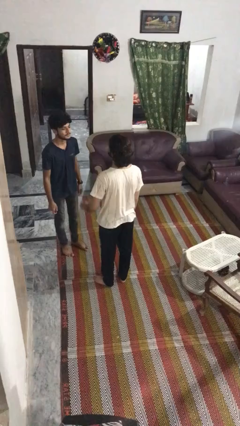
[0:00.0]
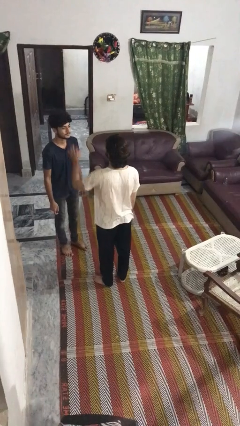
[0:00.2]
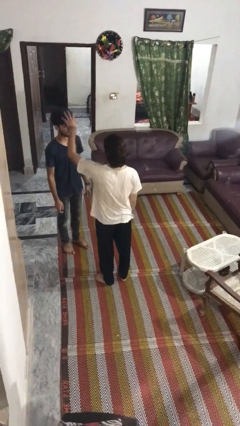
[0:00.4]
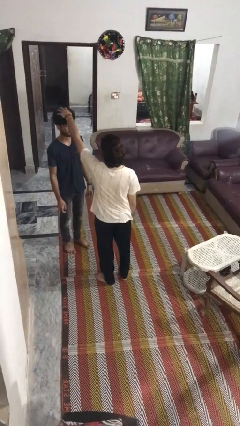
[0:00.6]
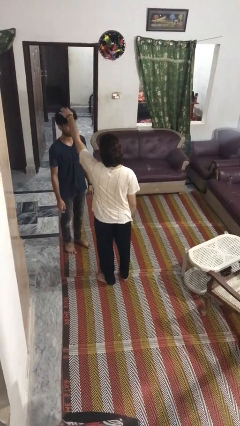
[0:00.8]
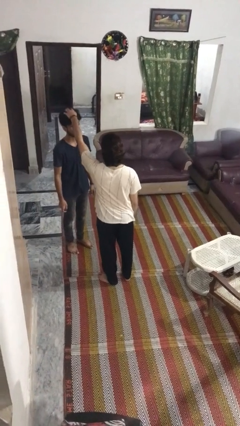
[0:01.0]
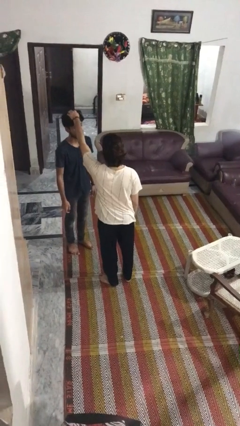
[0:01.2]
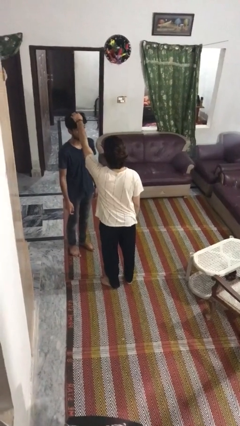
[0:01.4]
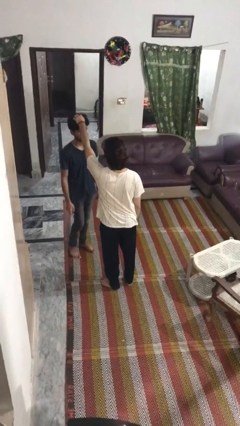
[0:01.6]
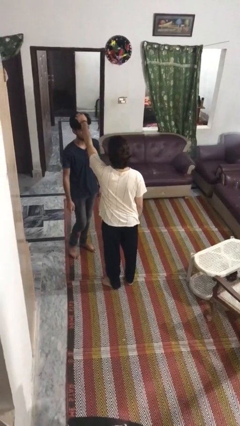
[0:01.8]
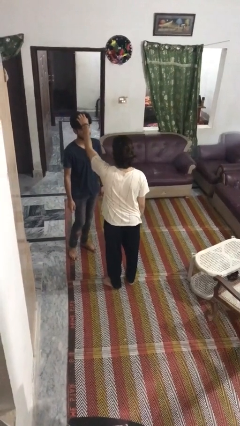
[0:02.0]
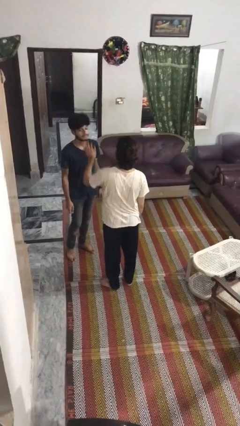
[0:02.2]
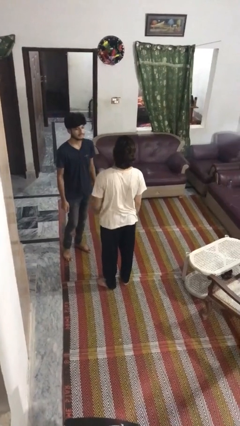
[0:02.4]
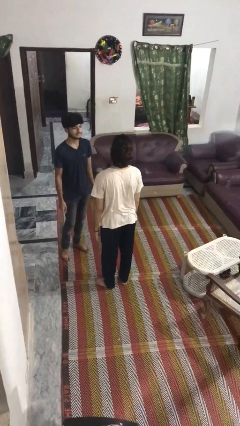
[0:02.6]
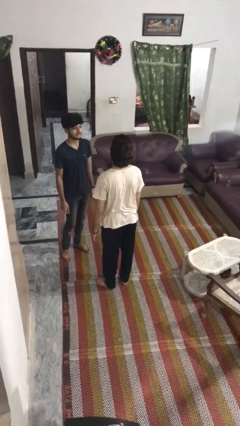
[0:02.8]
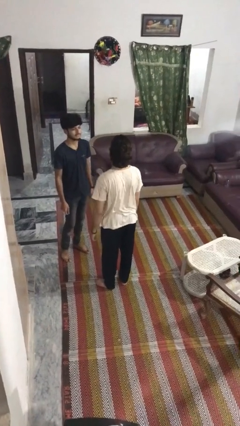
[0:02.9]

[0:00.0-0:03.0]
person grabs person by hair

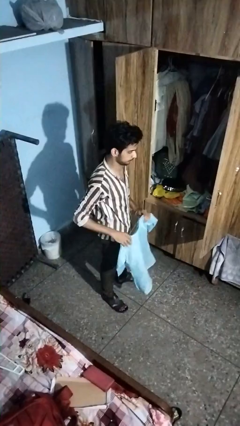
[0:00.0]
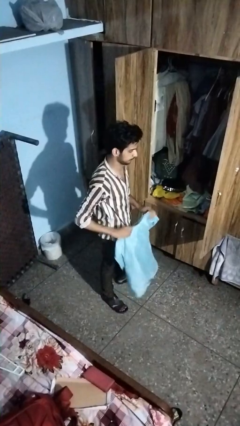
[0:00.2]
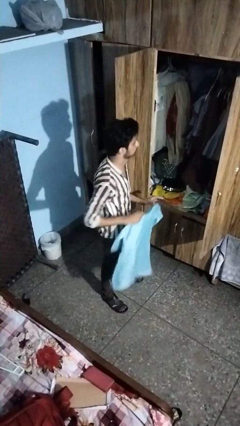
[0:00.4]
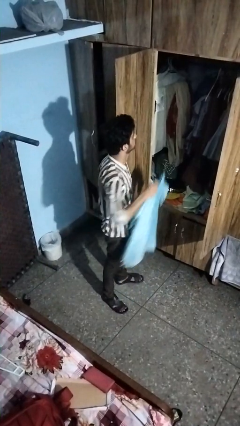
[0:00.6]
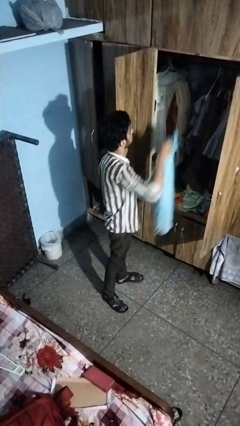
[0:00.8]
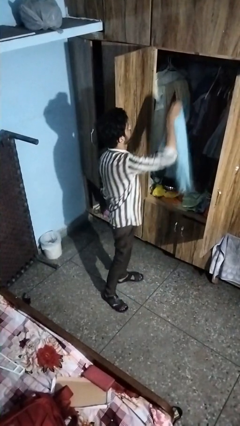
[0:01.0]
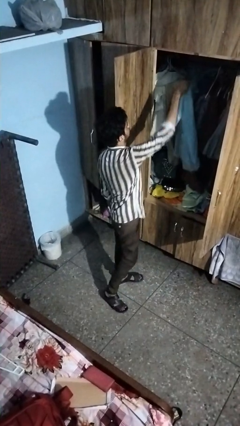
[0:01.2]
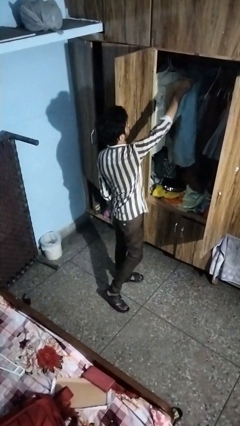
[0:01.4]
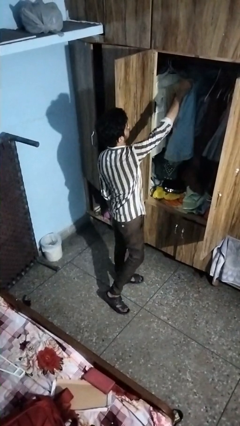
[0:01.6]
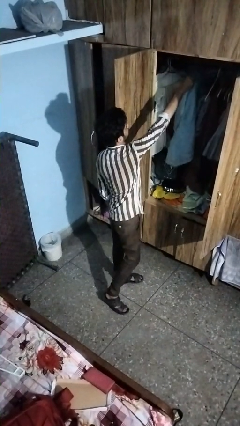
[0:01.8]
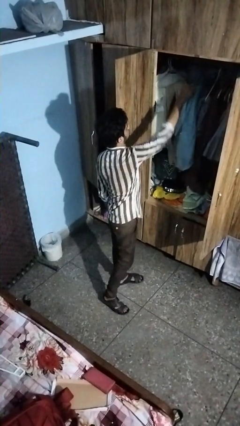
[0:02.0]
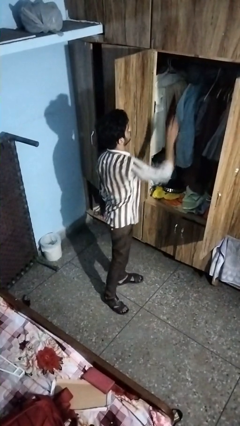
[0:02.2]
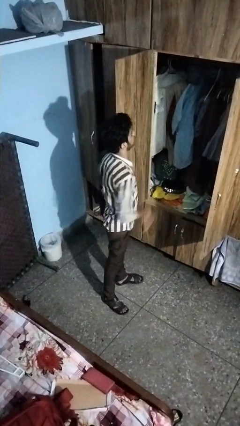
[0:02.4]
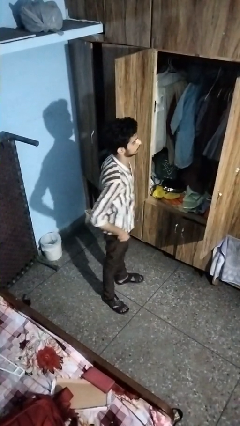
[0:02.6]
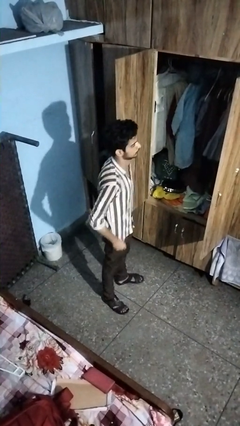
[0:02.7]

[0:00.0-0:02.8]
person puts clothes into closet

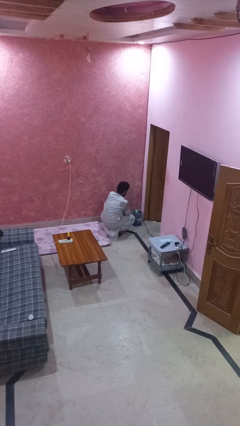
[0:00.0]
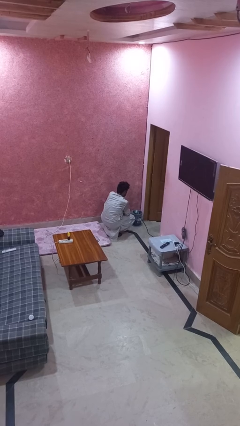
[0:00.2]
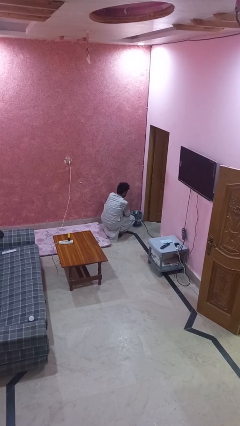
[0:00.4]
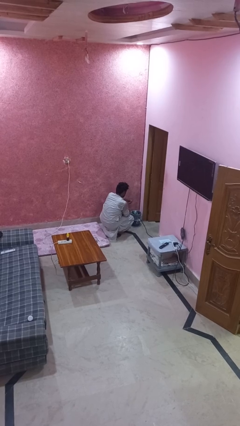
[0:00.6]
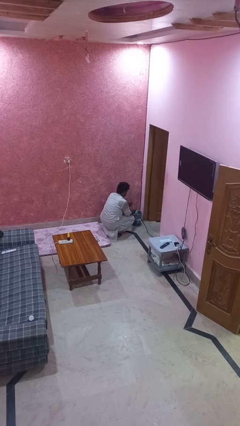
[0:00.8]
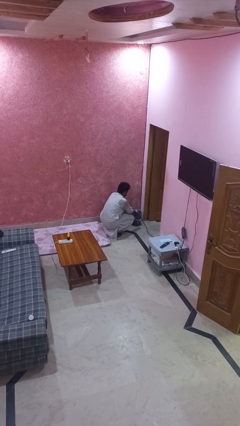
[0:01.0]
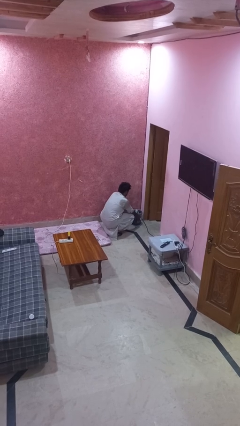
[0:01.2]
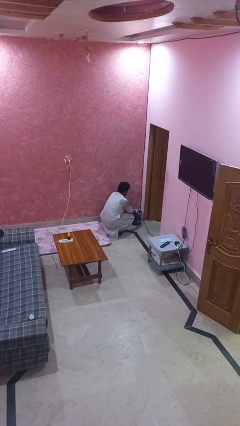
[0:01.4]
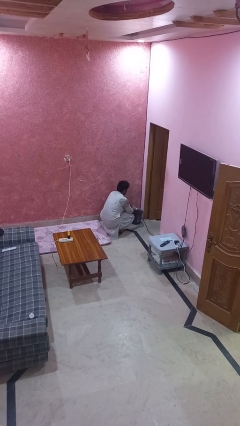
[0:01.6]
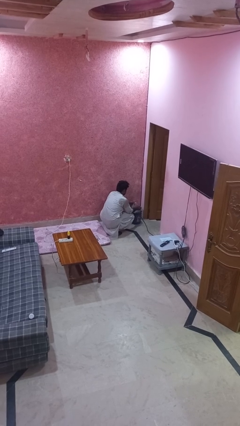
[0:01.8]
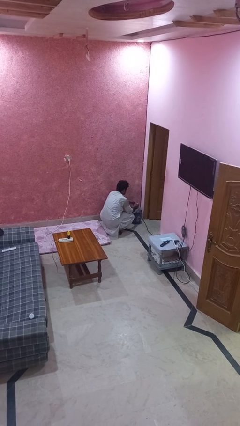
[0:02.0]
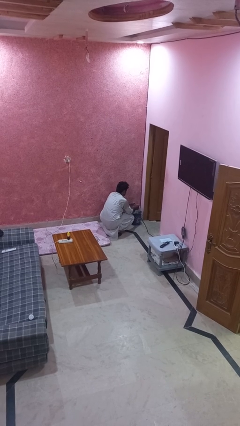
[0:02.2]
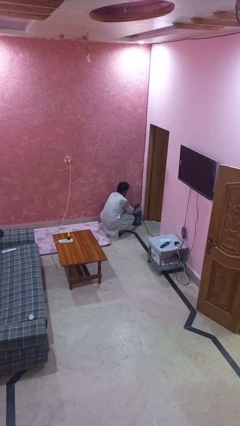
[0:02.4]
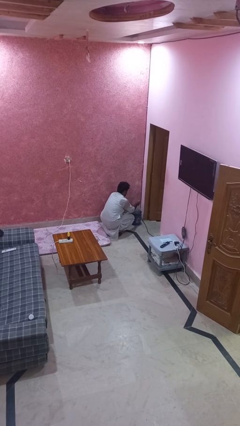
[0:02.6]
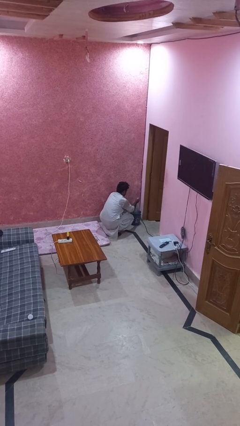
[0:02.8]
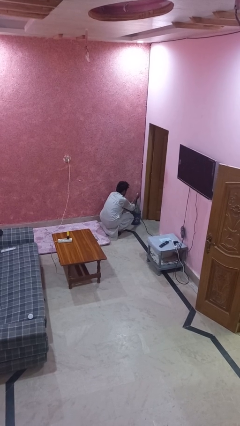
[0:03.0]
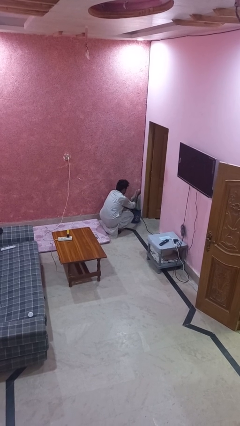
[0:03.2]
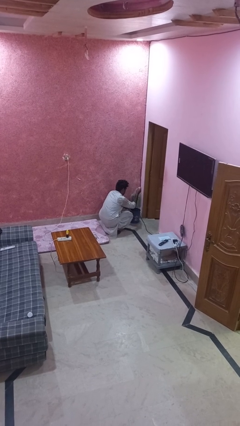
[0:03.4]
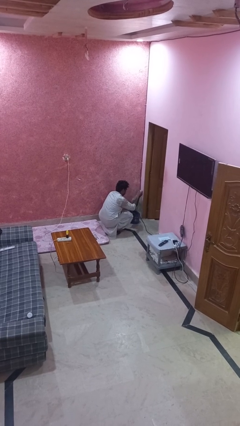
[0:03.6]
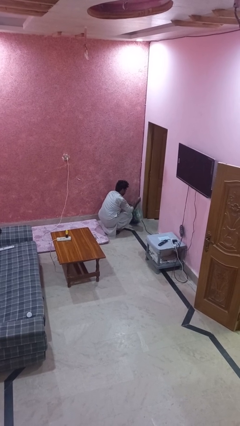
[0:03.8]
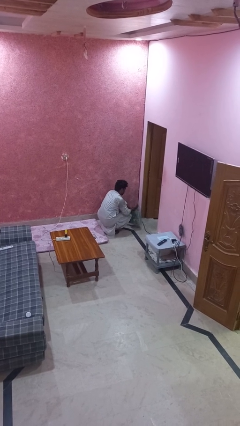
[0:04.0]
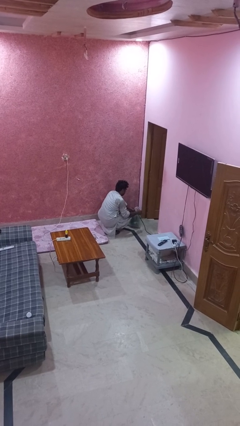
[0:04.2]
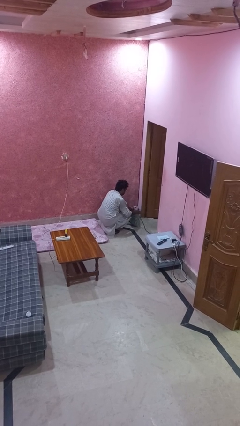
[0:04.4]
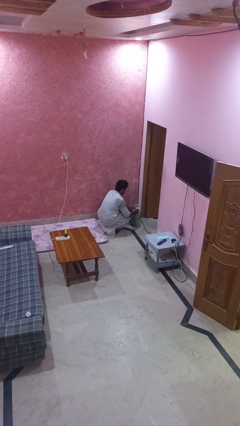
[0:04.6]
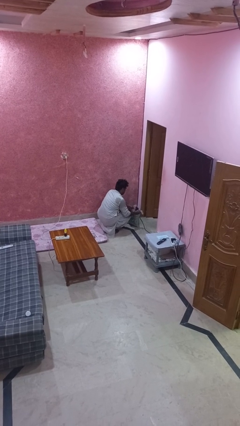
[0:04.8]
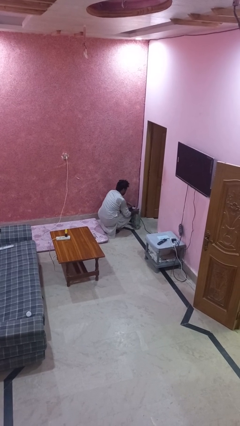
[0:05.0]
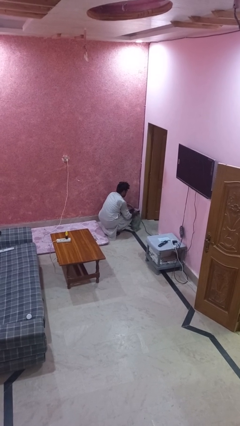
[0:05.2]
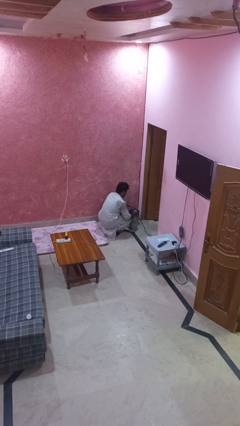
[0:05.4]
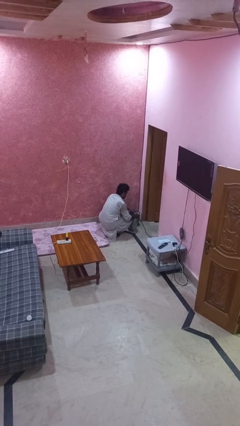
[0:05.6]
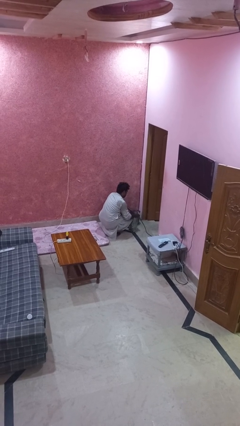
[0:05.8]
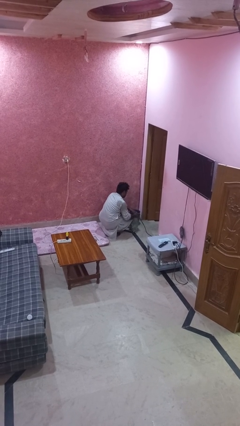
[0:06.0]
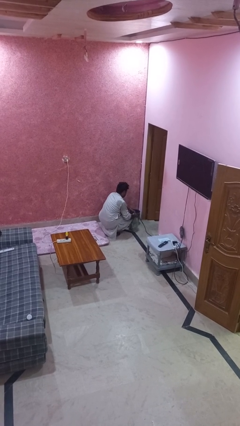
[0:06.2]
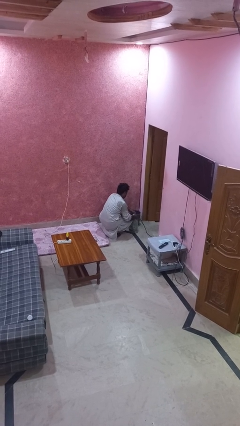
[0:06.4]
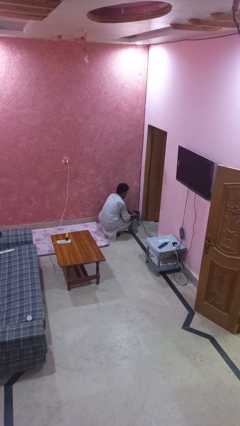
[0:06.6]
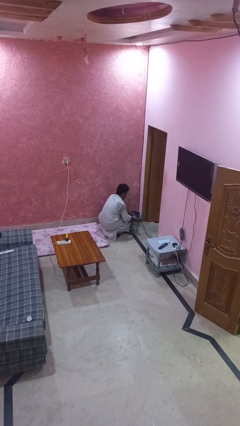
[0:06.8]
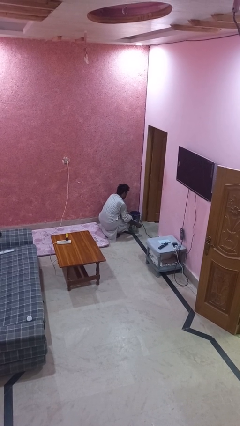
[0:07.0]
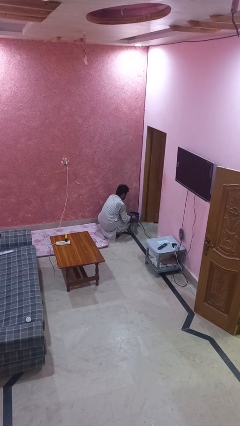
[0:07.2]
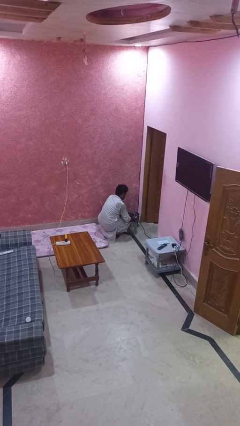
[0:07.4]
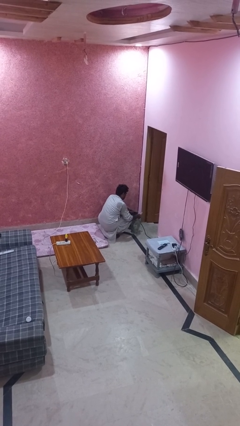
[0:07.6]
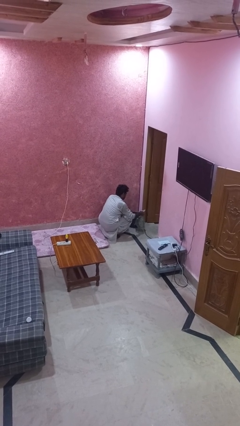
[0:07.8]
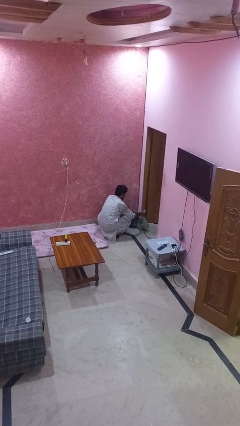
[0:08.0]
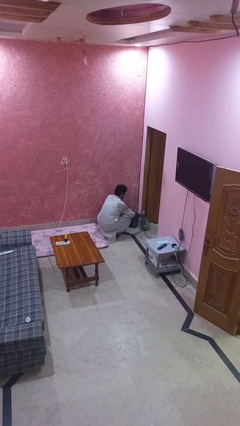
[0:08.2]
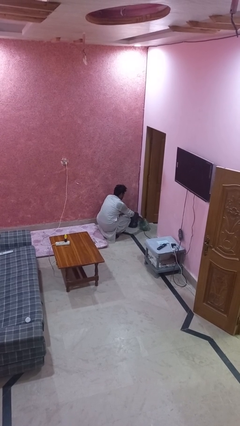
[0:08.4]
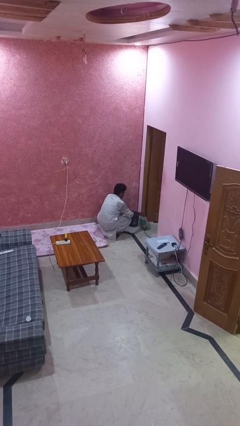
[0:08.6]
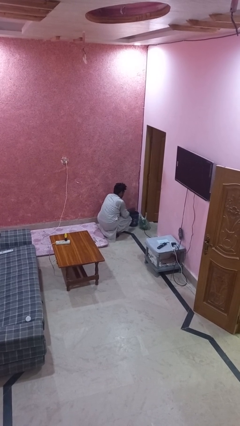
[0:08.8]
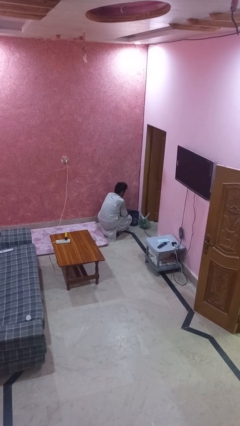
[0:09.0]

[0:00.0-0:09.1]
person removes trashbag from trashcan

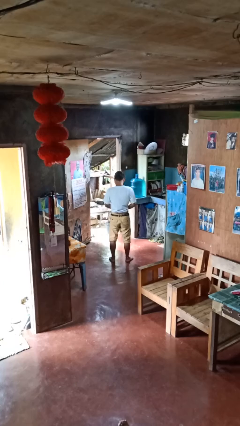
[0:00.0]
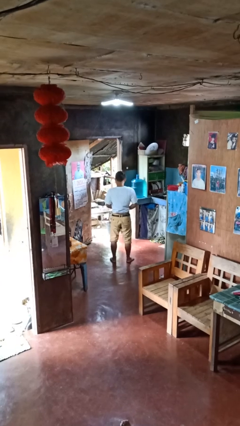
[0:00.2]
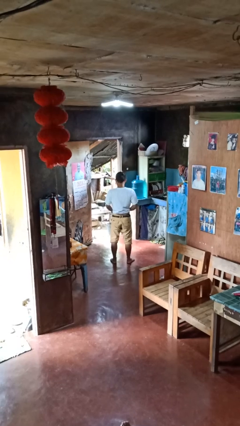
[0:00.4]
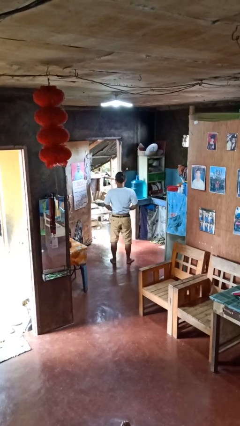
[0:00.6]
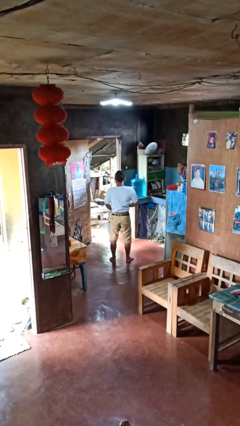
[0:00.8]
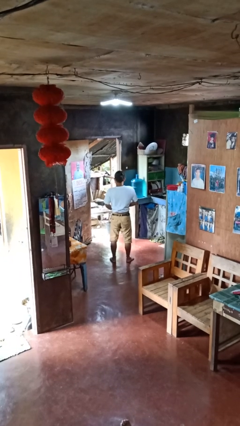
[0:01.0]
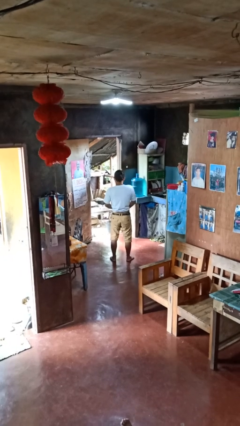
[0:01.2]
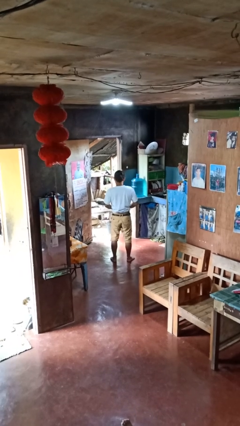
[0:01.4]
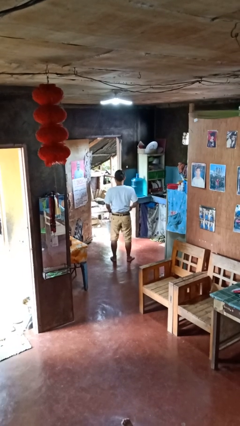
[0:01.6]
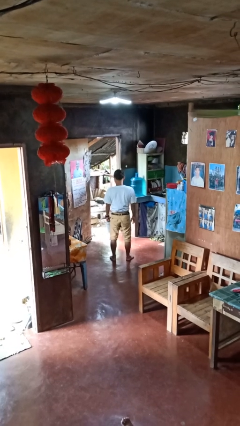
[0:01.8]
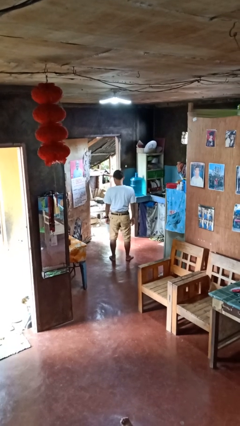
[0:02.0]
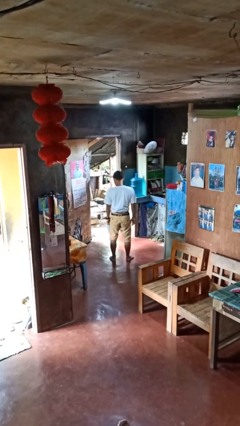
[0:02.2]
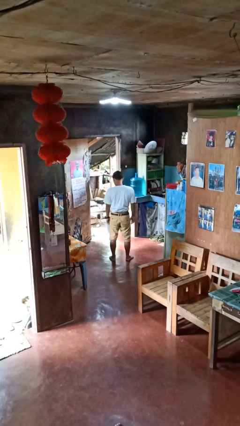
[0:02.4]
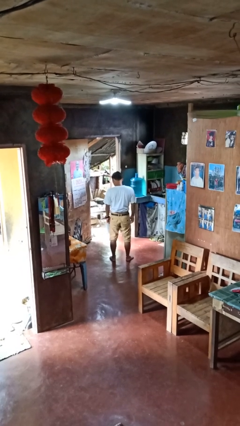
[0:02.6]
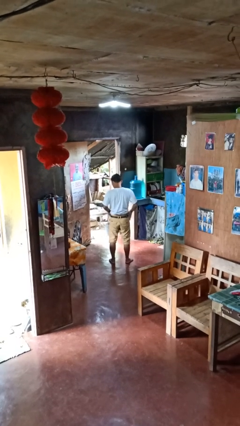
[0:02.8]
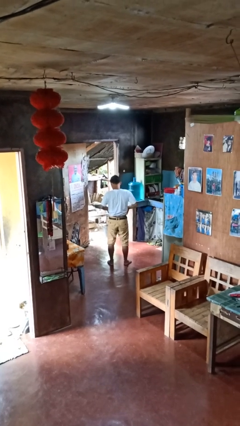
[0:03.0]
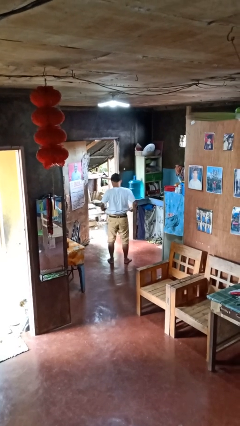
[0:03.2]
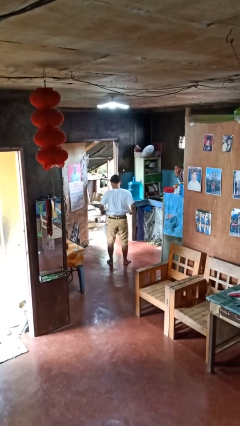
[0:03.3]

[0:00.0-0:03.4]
person tucks in shirt
